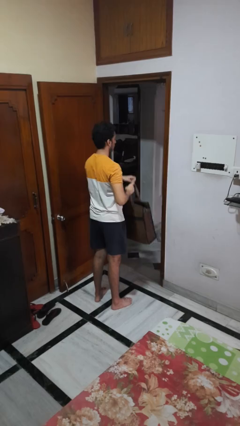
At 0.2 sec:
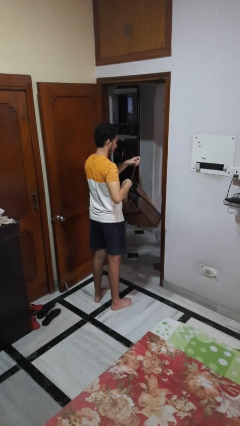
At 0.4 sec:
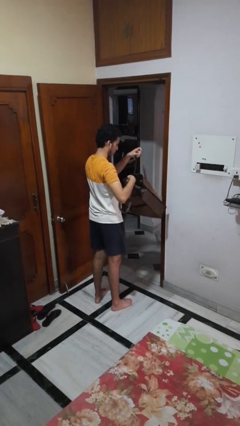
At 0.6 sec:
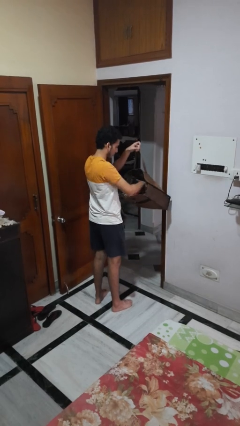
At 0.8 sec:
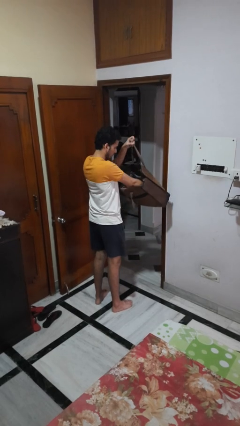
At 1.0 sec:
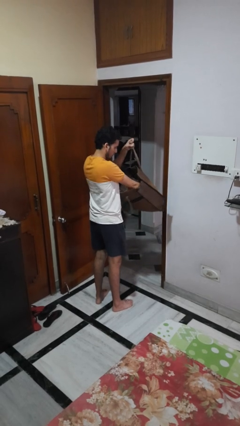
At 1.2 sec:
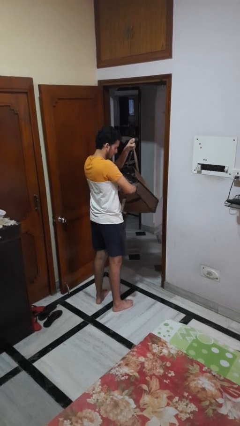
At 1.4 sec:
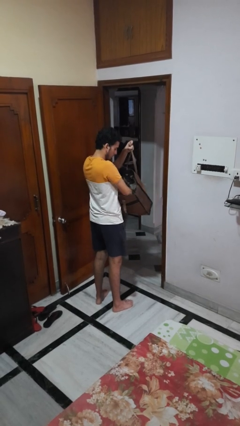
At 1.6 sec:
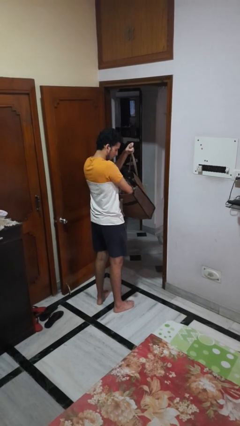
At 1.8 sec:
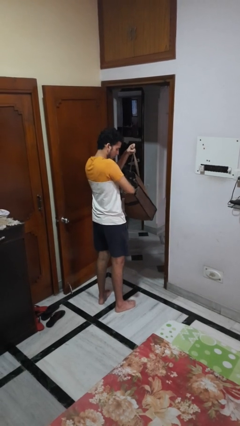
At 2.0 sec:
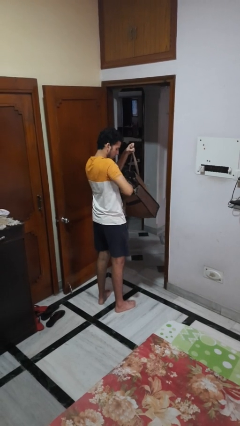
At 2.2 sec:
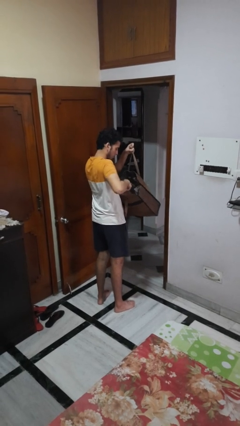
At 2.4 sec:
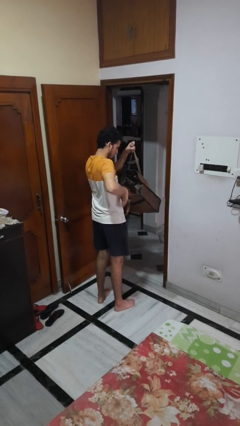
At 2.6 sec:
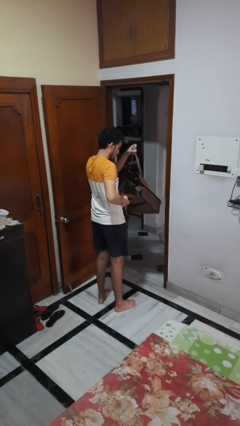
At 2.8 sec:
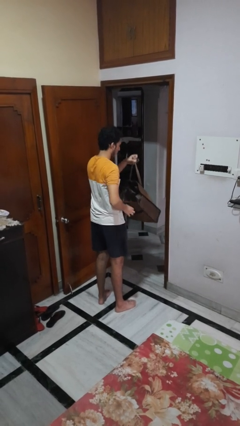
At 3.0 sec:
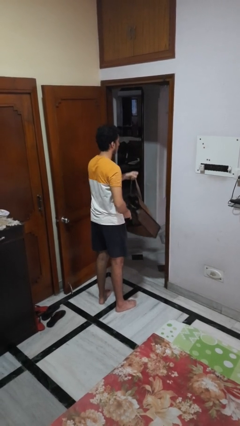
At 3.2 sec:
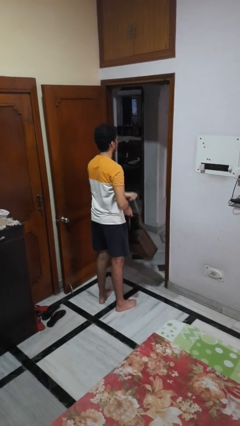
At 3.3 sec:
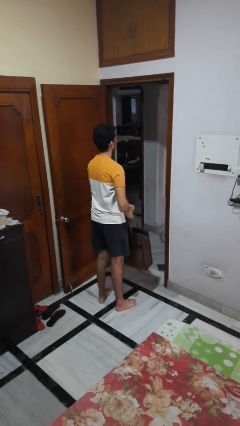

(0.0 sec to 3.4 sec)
person searches in bag

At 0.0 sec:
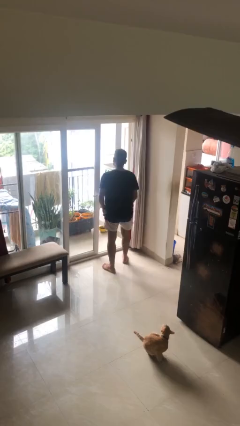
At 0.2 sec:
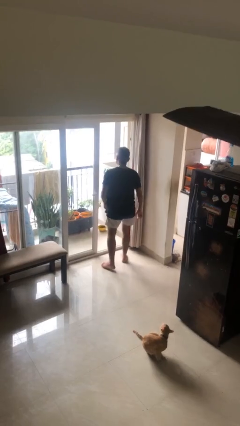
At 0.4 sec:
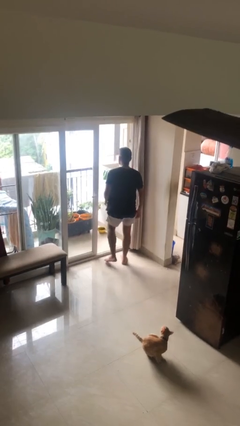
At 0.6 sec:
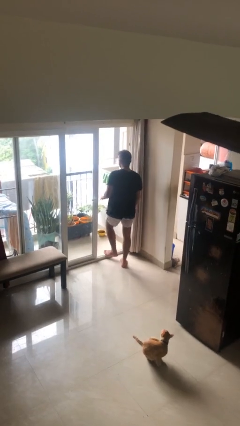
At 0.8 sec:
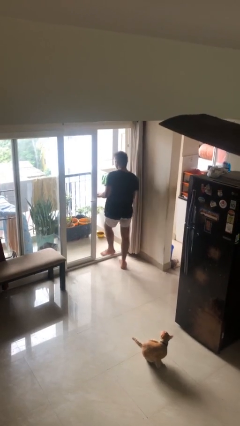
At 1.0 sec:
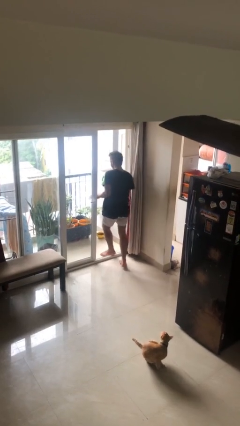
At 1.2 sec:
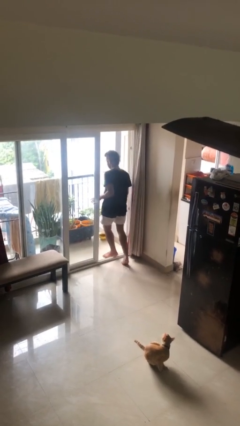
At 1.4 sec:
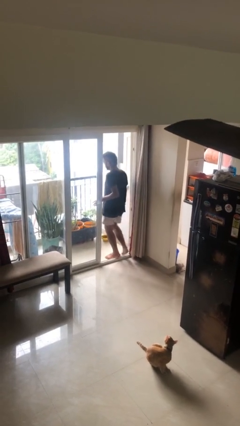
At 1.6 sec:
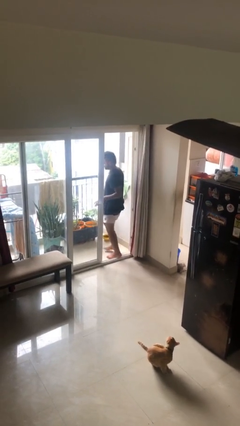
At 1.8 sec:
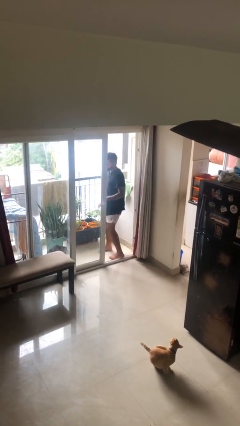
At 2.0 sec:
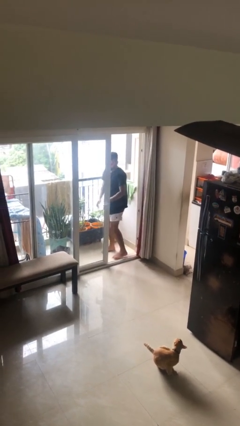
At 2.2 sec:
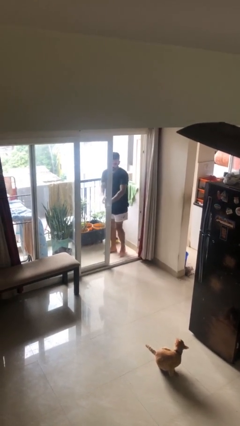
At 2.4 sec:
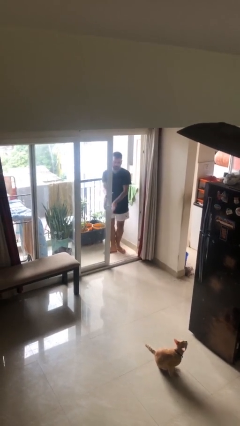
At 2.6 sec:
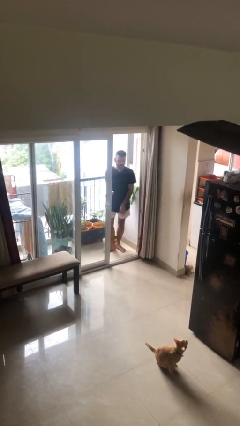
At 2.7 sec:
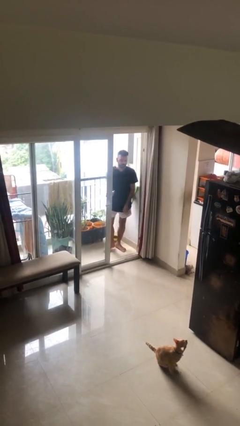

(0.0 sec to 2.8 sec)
person exits scene through structure

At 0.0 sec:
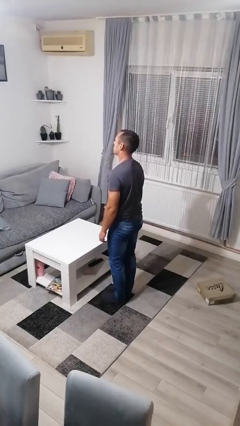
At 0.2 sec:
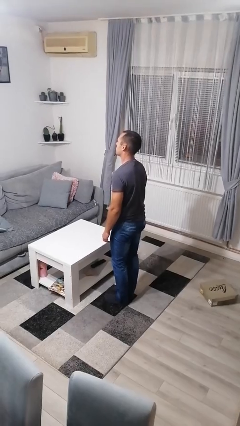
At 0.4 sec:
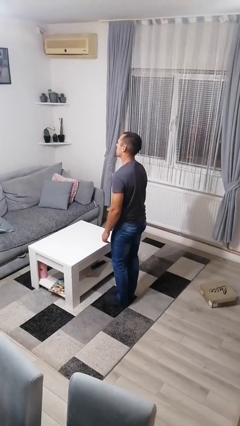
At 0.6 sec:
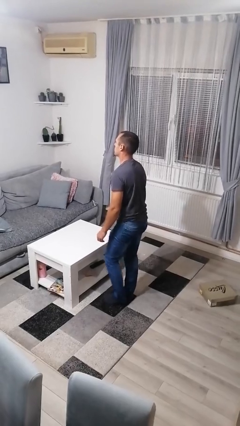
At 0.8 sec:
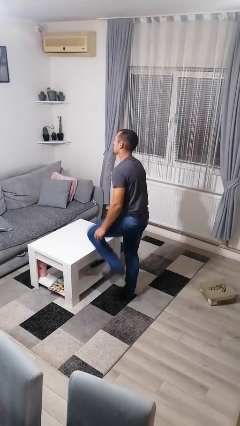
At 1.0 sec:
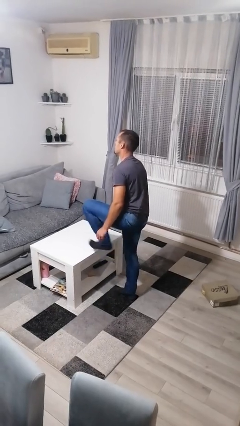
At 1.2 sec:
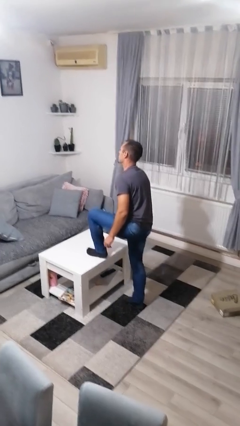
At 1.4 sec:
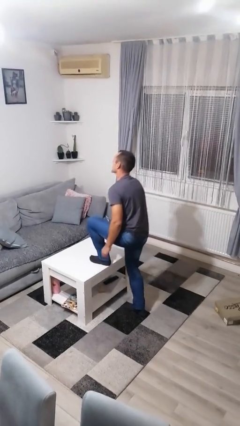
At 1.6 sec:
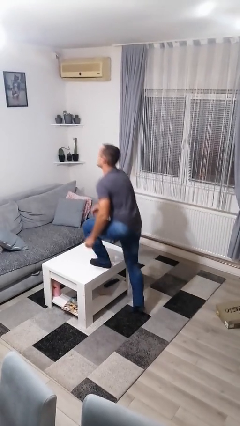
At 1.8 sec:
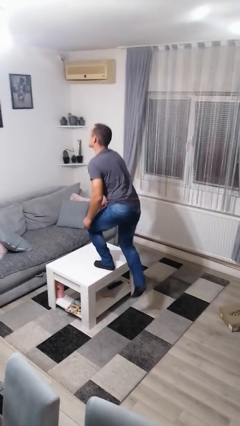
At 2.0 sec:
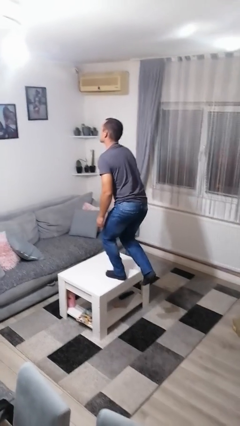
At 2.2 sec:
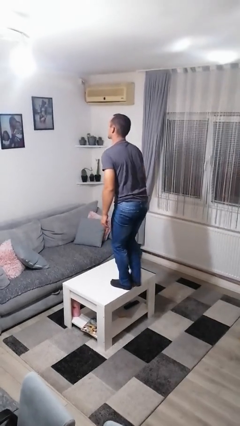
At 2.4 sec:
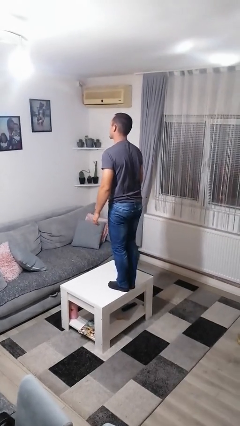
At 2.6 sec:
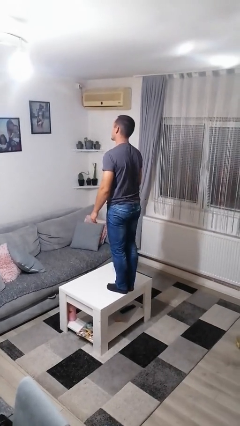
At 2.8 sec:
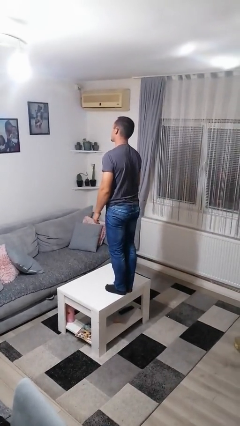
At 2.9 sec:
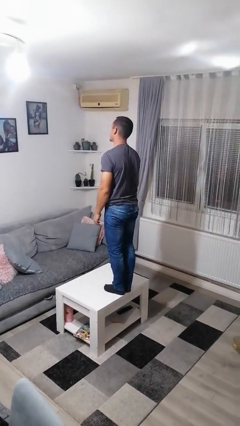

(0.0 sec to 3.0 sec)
person climbs on table

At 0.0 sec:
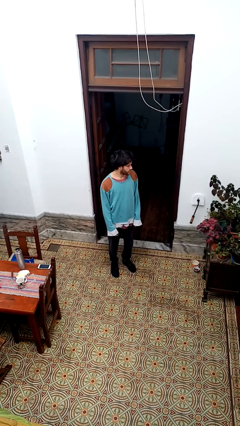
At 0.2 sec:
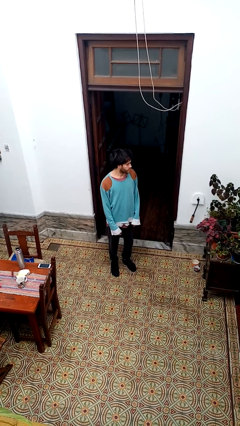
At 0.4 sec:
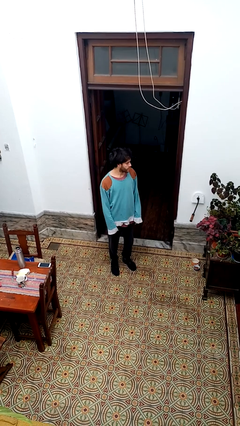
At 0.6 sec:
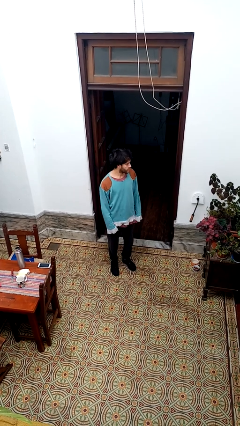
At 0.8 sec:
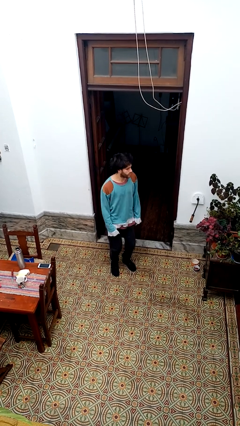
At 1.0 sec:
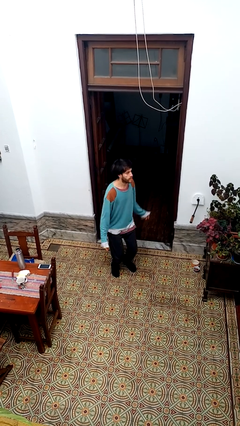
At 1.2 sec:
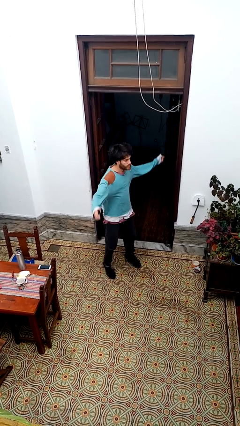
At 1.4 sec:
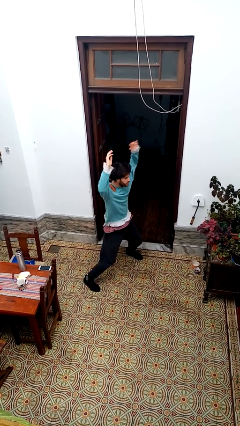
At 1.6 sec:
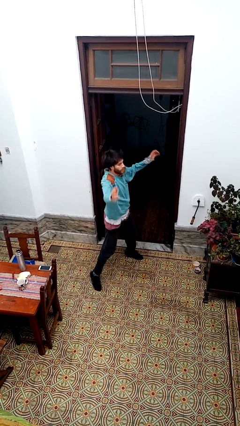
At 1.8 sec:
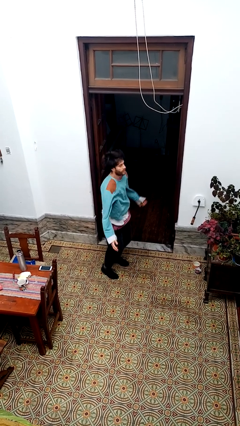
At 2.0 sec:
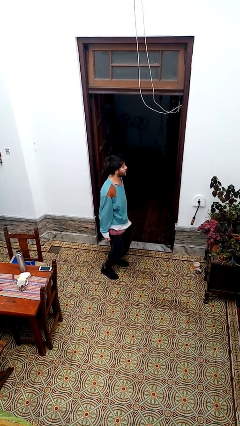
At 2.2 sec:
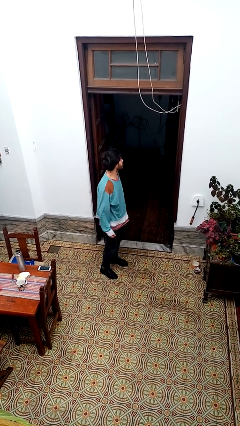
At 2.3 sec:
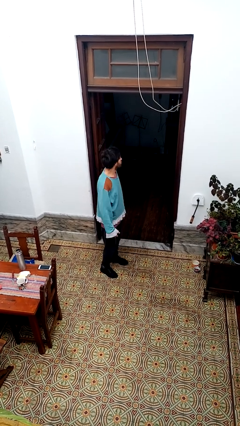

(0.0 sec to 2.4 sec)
person exercises with jumping jacks

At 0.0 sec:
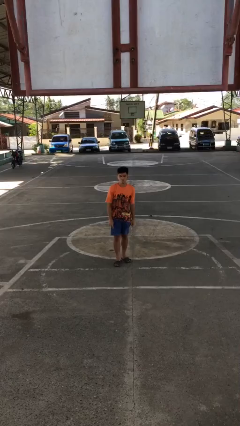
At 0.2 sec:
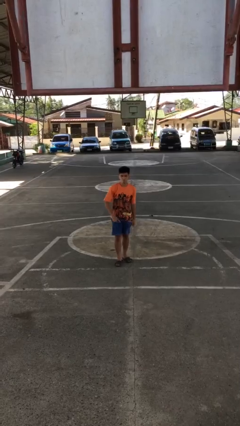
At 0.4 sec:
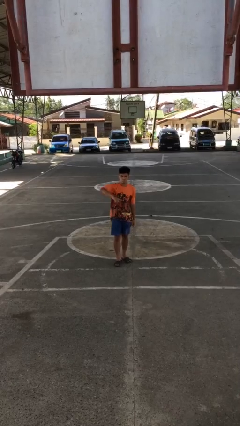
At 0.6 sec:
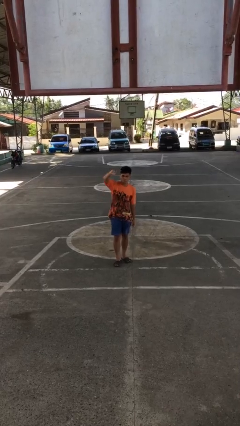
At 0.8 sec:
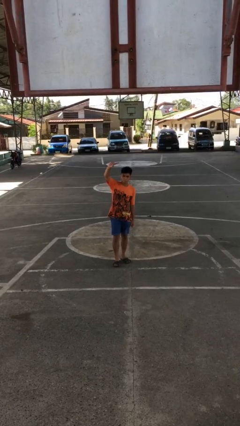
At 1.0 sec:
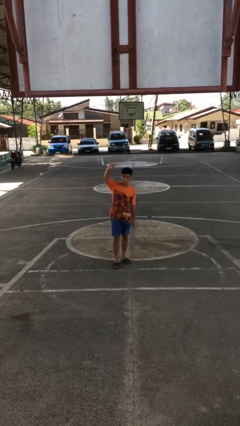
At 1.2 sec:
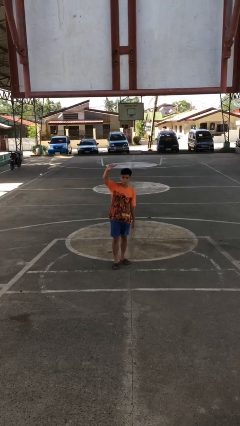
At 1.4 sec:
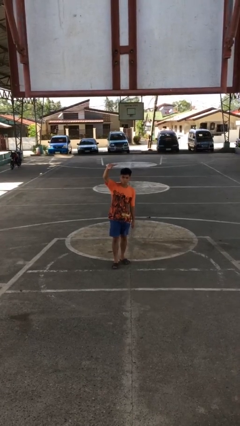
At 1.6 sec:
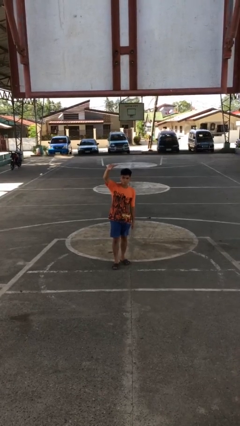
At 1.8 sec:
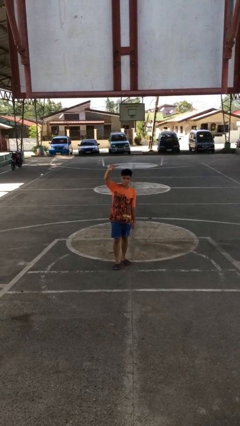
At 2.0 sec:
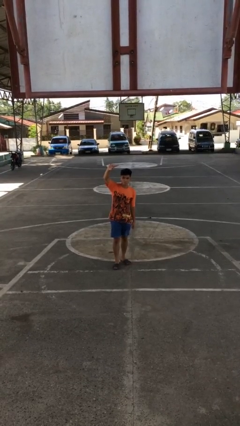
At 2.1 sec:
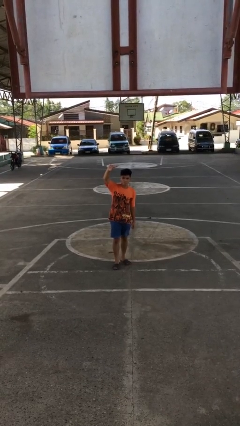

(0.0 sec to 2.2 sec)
person gestures swipe up

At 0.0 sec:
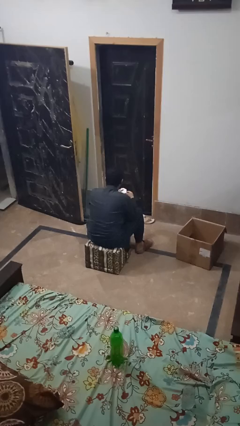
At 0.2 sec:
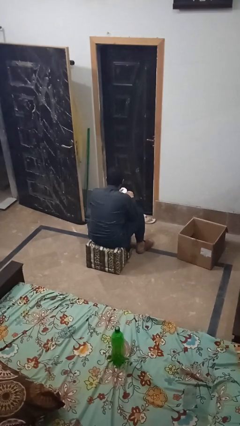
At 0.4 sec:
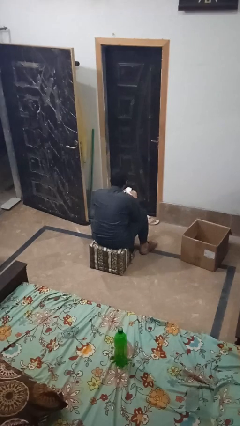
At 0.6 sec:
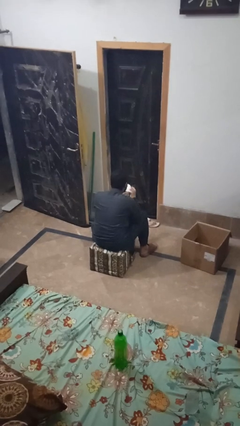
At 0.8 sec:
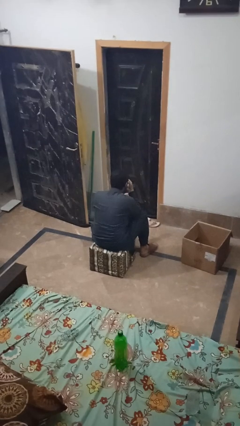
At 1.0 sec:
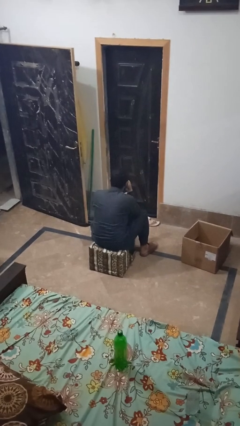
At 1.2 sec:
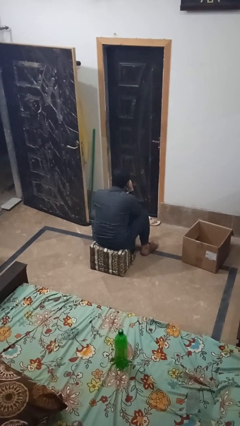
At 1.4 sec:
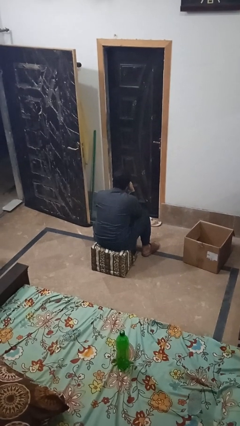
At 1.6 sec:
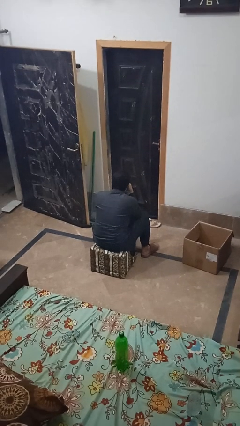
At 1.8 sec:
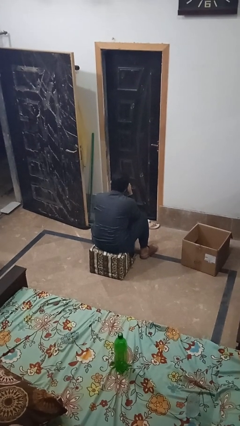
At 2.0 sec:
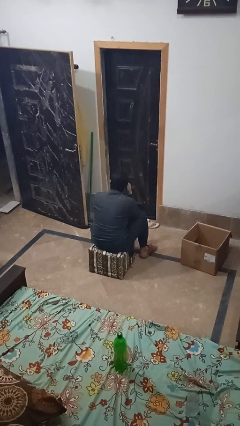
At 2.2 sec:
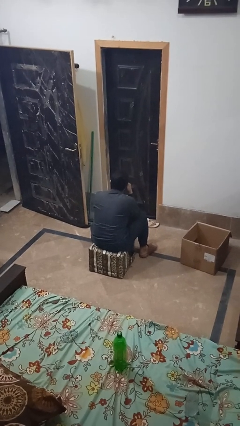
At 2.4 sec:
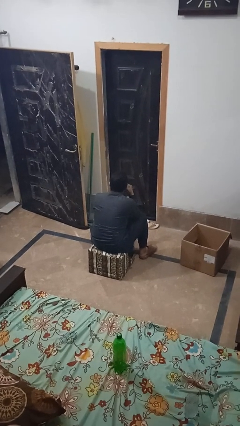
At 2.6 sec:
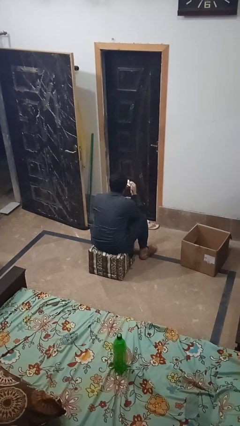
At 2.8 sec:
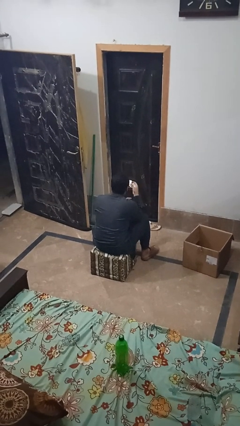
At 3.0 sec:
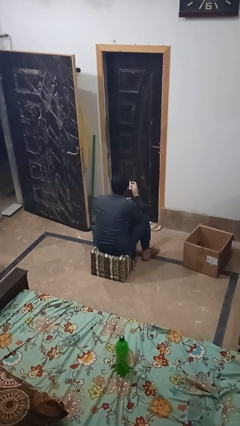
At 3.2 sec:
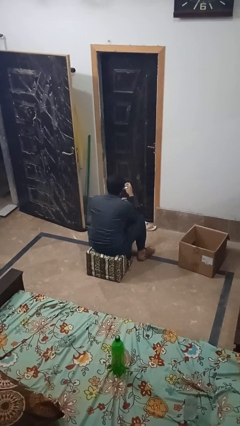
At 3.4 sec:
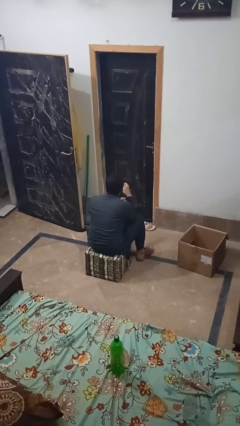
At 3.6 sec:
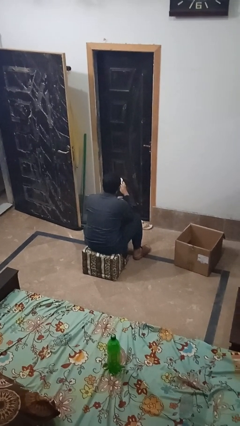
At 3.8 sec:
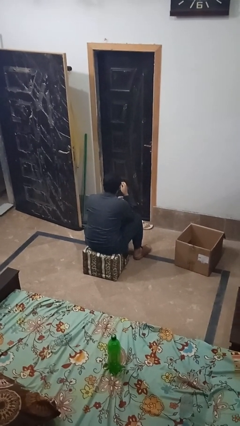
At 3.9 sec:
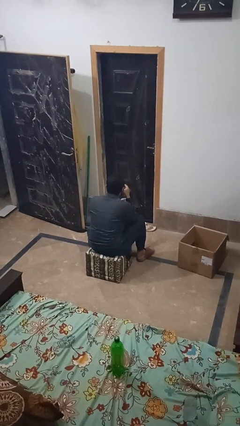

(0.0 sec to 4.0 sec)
person blows nose
